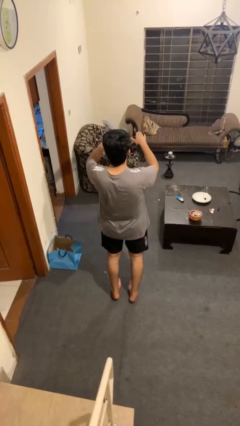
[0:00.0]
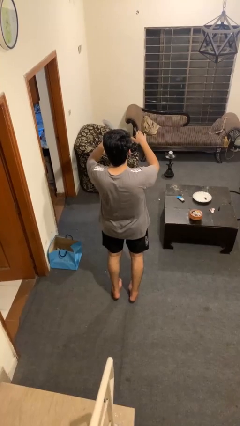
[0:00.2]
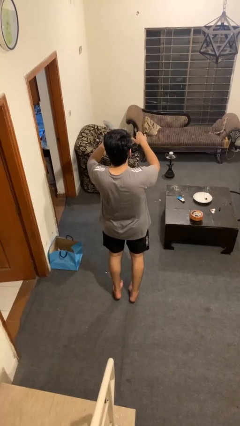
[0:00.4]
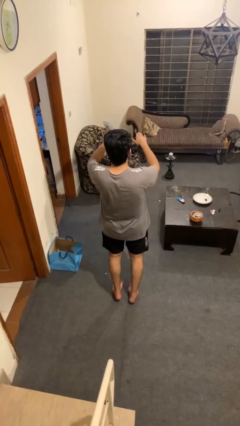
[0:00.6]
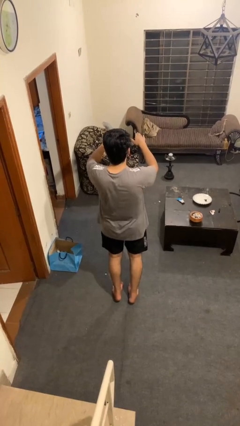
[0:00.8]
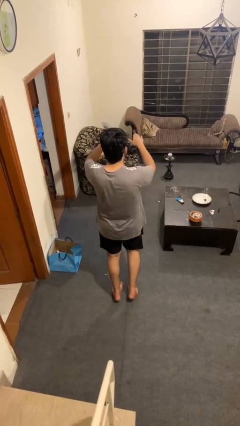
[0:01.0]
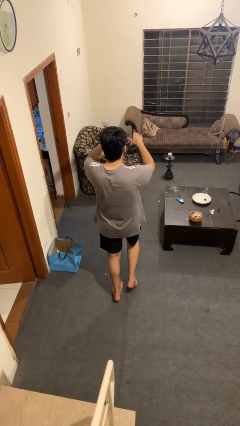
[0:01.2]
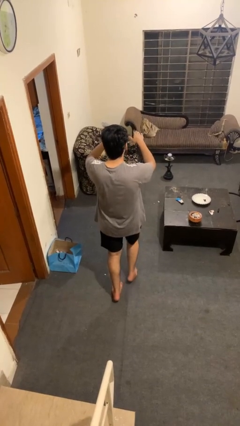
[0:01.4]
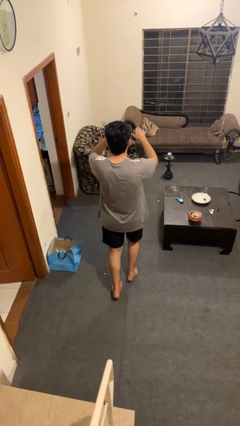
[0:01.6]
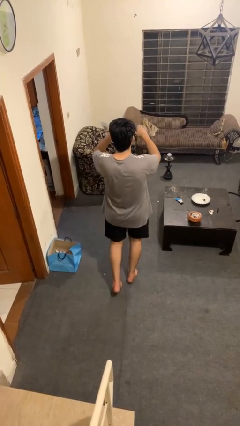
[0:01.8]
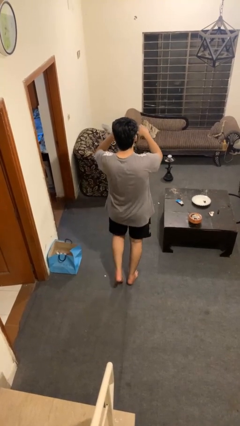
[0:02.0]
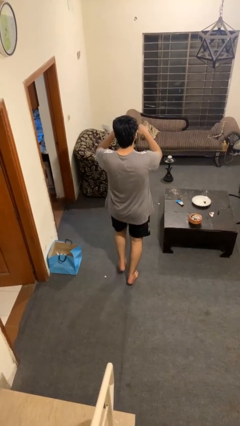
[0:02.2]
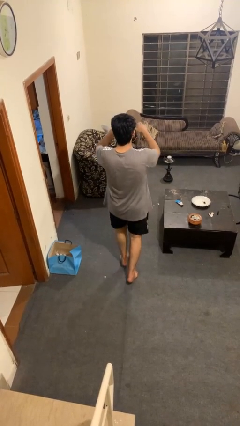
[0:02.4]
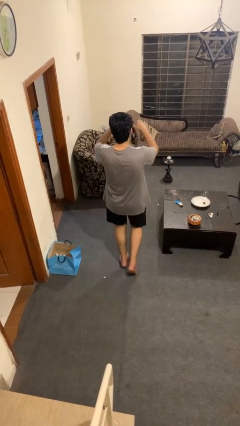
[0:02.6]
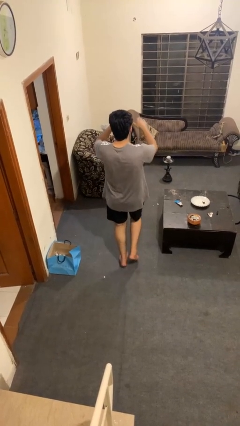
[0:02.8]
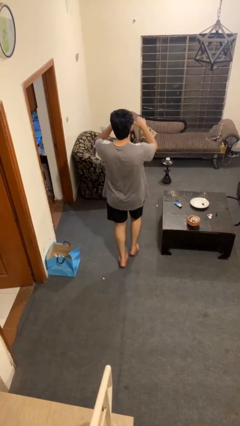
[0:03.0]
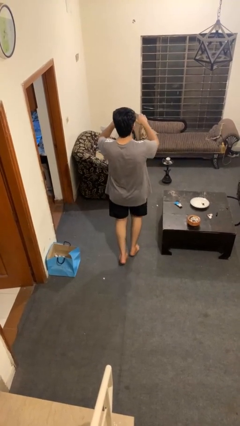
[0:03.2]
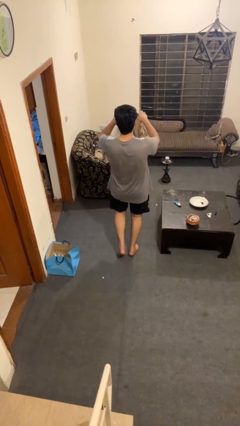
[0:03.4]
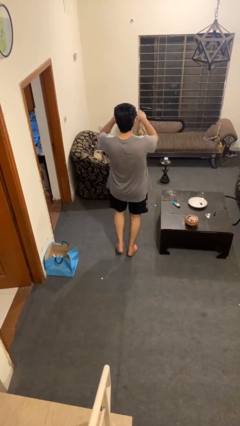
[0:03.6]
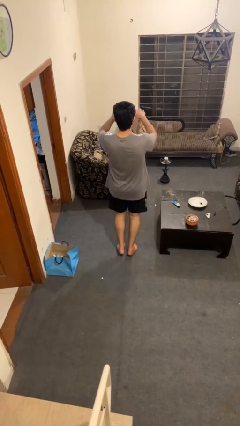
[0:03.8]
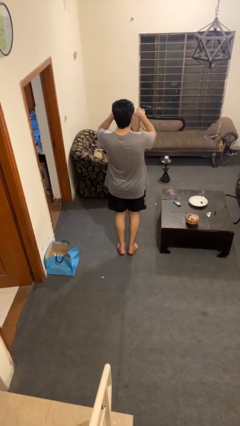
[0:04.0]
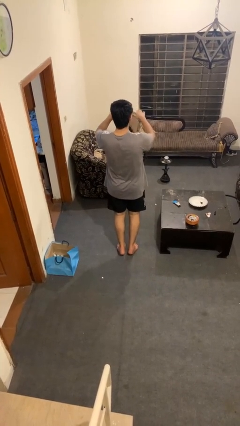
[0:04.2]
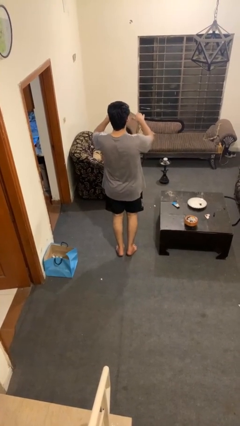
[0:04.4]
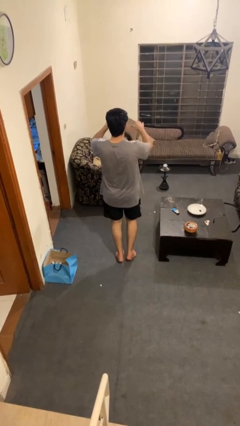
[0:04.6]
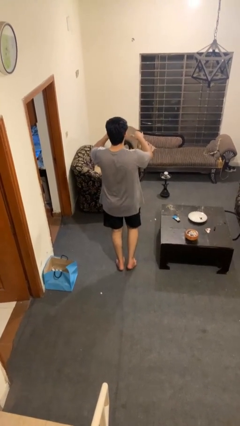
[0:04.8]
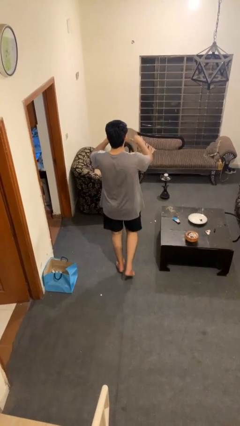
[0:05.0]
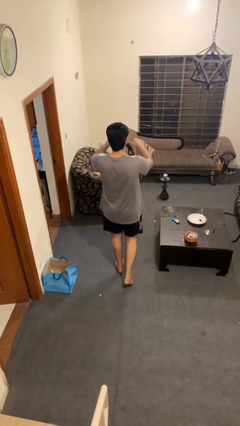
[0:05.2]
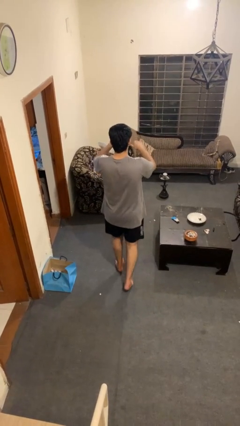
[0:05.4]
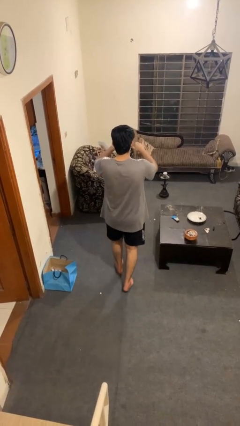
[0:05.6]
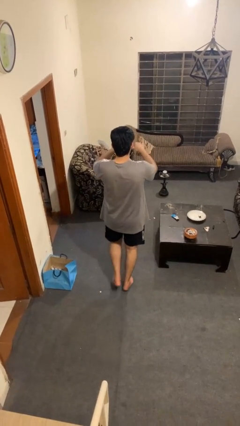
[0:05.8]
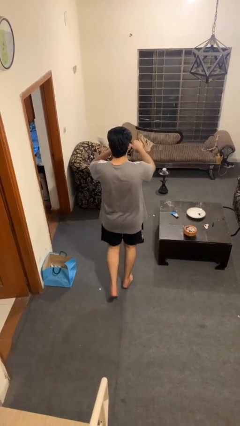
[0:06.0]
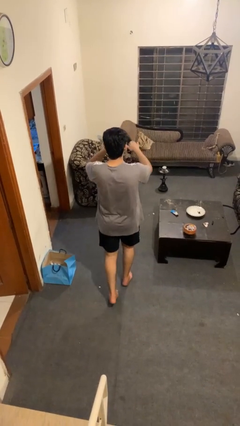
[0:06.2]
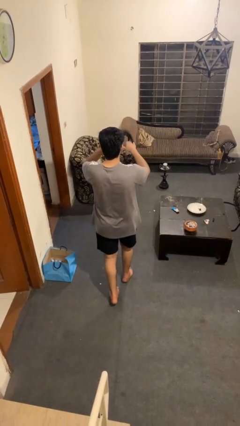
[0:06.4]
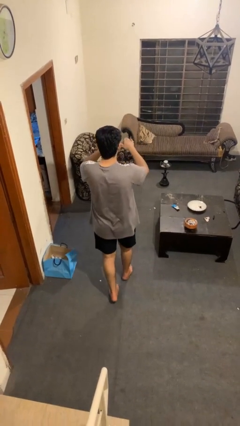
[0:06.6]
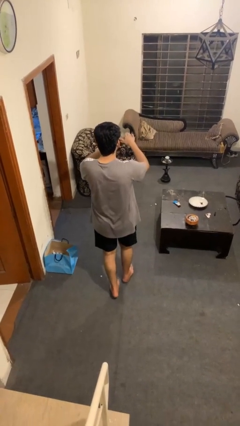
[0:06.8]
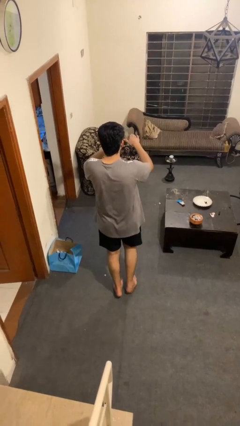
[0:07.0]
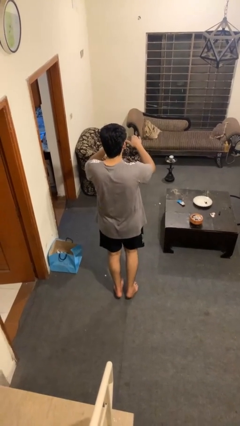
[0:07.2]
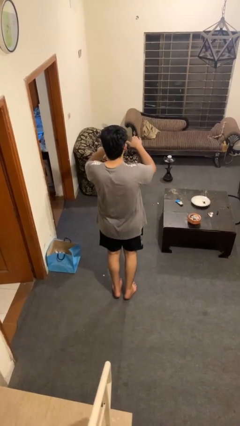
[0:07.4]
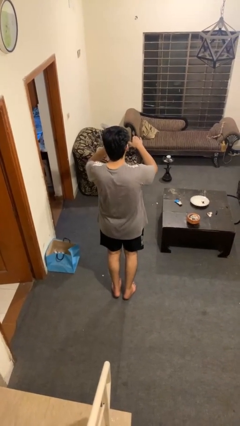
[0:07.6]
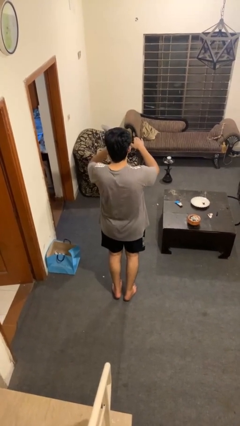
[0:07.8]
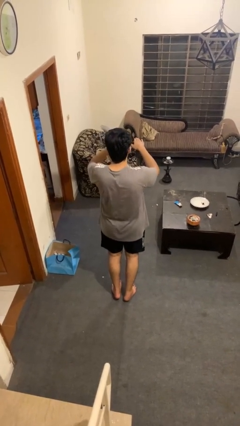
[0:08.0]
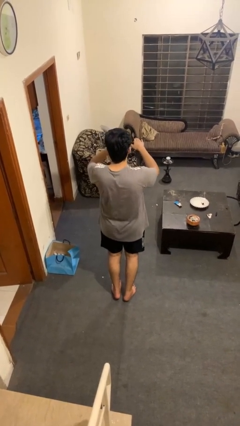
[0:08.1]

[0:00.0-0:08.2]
person walks tiptoe

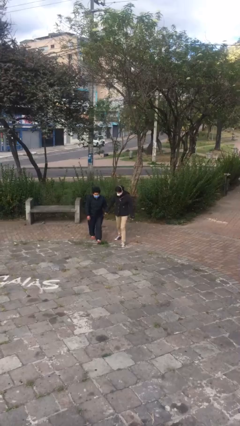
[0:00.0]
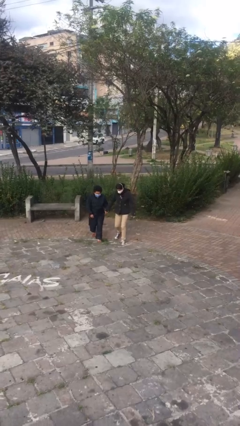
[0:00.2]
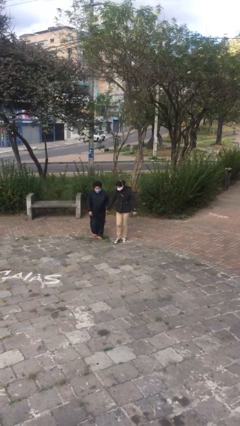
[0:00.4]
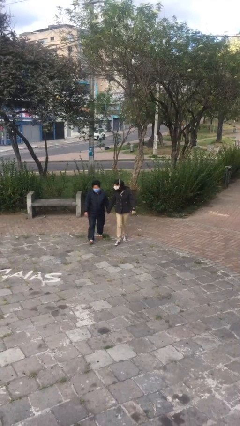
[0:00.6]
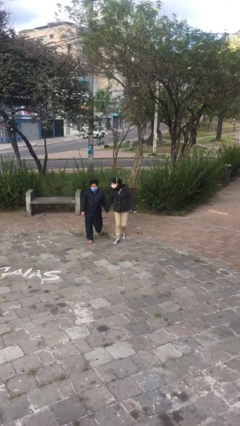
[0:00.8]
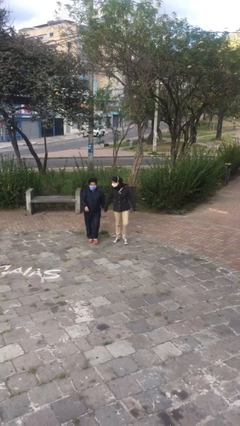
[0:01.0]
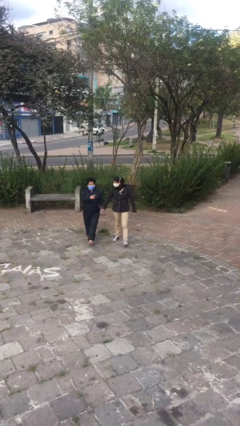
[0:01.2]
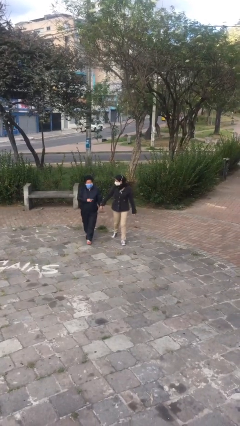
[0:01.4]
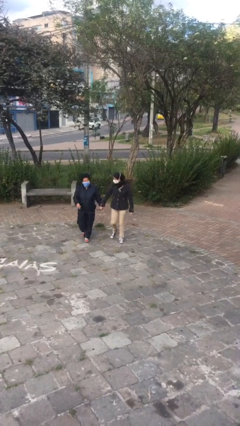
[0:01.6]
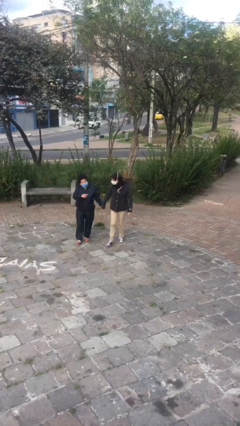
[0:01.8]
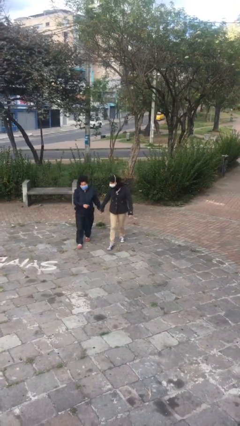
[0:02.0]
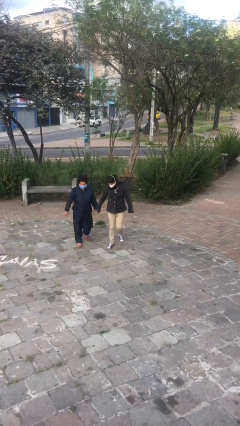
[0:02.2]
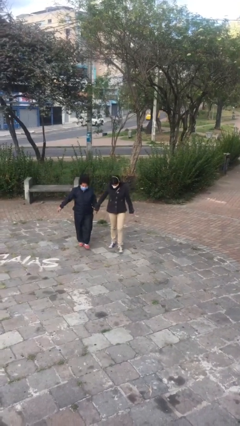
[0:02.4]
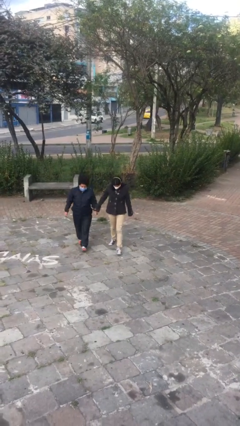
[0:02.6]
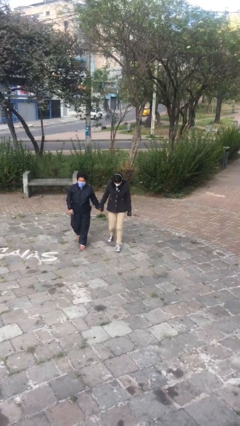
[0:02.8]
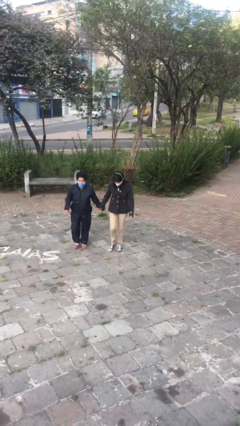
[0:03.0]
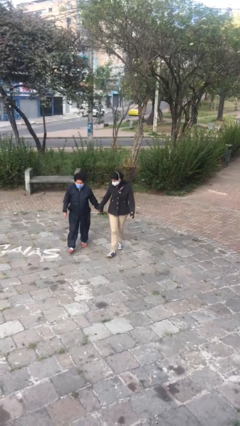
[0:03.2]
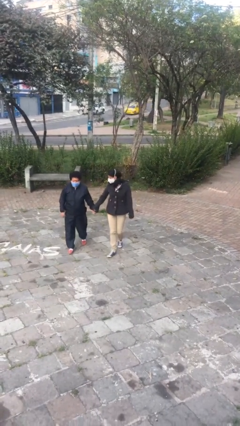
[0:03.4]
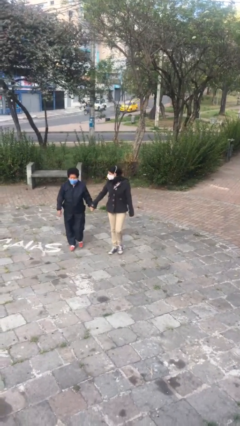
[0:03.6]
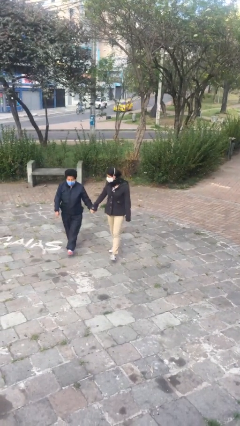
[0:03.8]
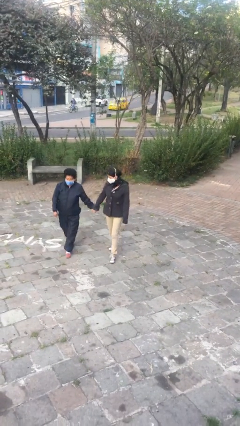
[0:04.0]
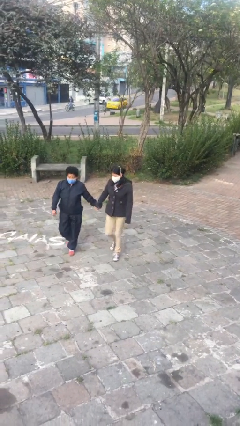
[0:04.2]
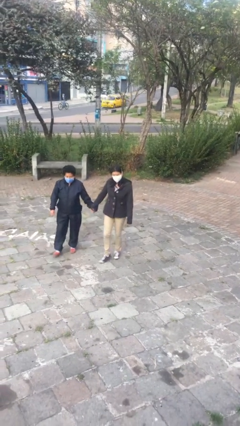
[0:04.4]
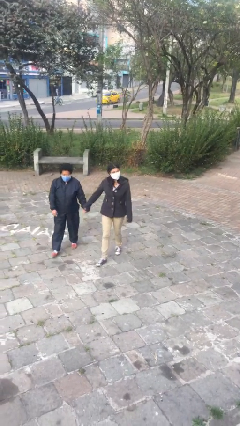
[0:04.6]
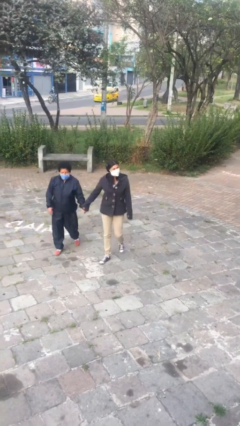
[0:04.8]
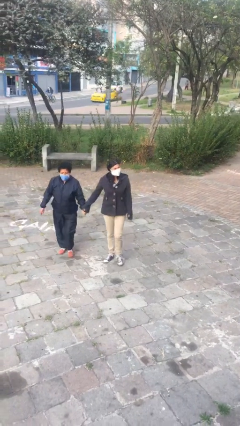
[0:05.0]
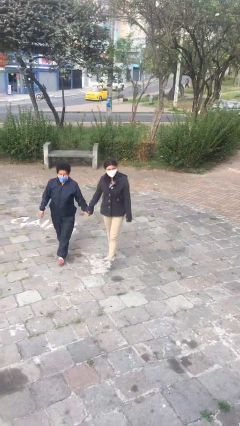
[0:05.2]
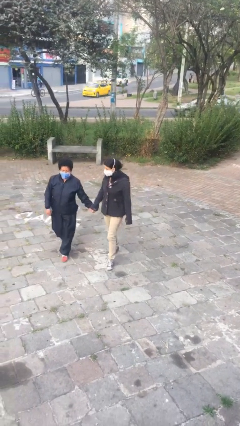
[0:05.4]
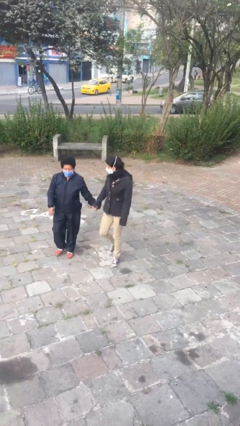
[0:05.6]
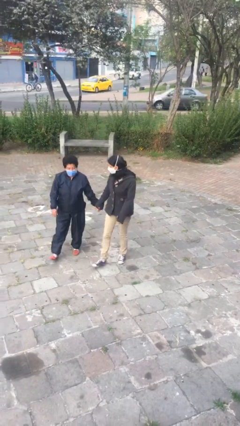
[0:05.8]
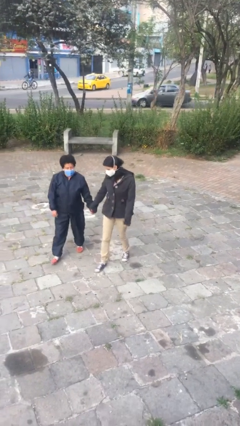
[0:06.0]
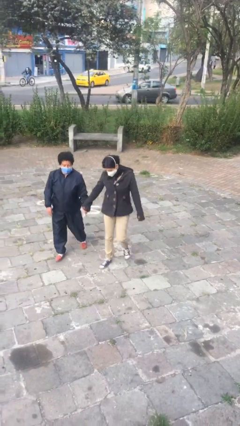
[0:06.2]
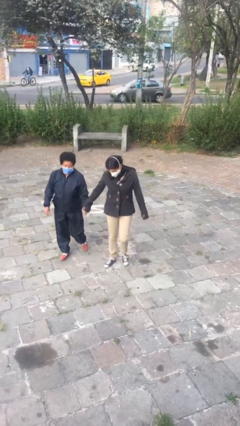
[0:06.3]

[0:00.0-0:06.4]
person holds hand

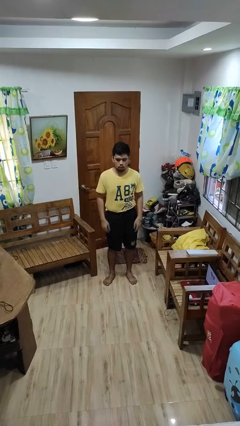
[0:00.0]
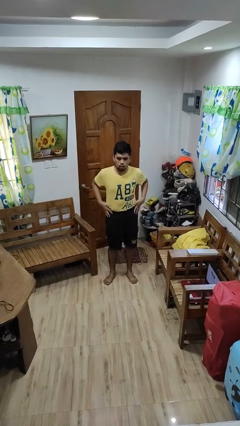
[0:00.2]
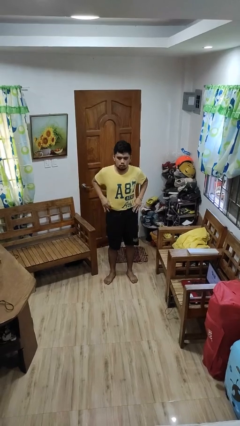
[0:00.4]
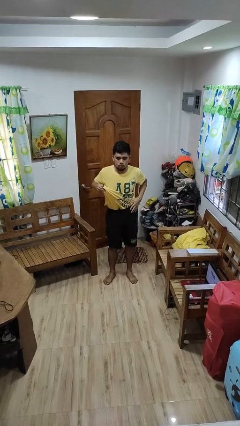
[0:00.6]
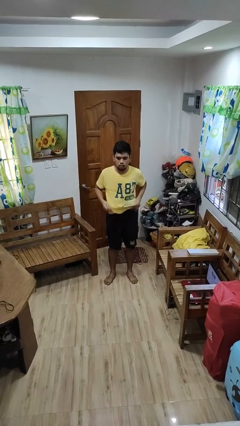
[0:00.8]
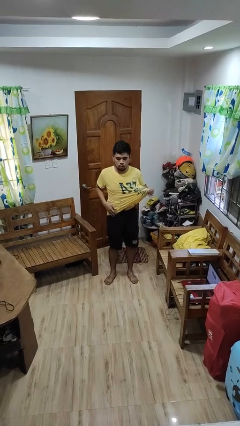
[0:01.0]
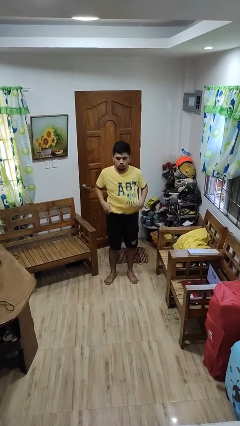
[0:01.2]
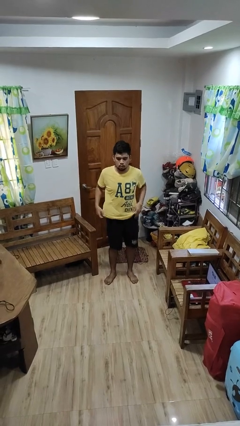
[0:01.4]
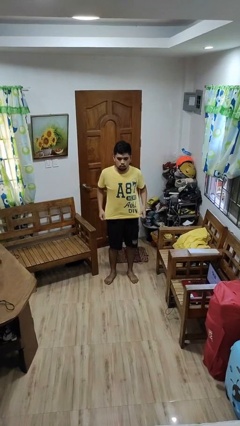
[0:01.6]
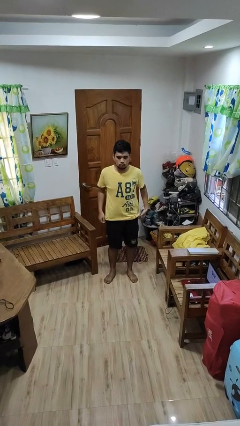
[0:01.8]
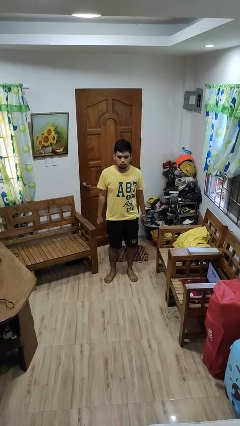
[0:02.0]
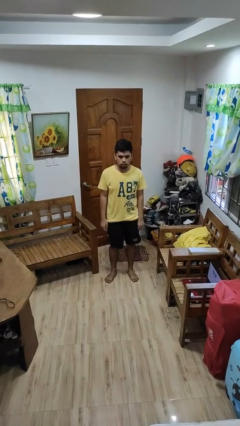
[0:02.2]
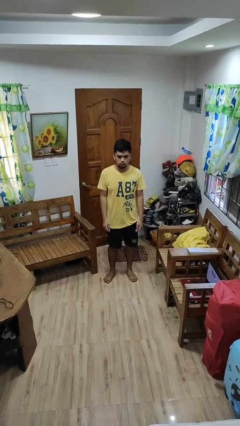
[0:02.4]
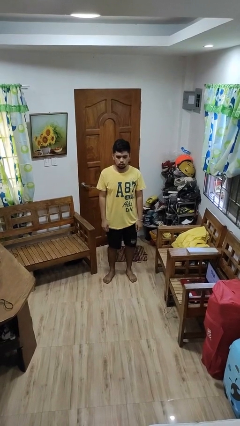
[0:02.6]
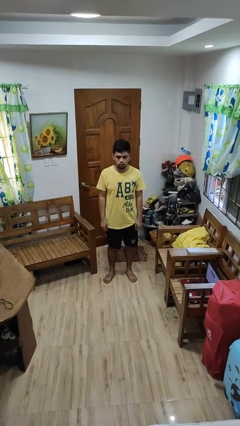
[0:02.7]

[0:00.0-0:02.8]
person untucks shirt

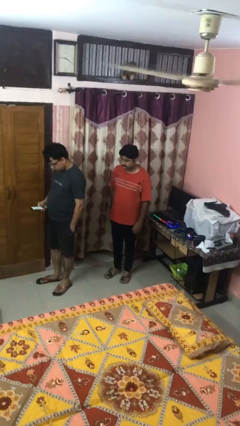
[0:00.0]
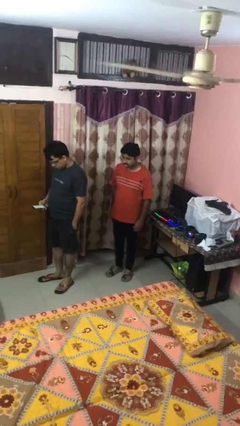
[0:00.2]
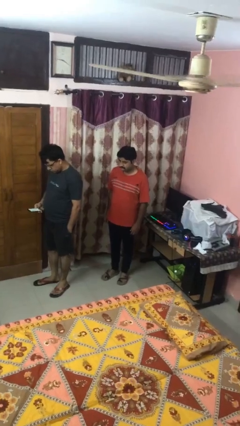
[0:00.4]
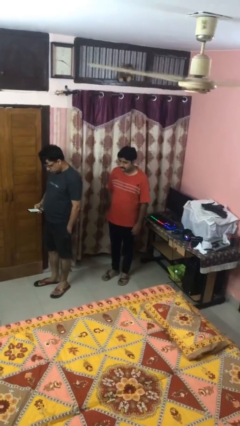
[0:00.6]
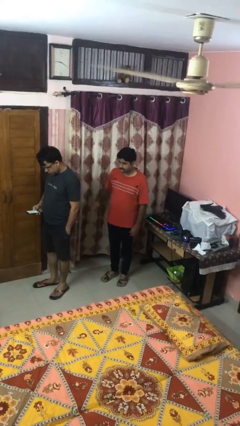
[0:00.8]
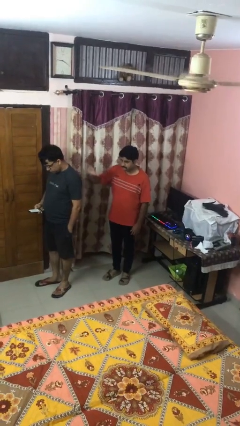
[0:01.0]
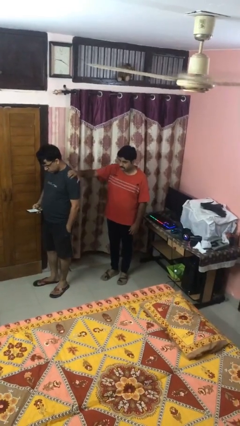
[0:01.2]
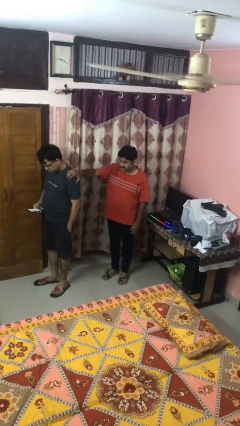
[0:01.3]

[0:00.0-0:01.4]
person grabs person by shoulder
